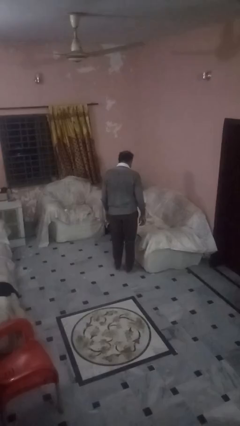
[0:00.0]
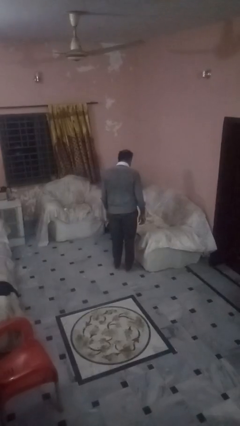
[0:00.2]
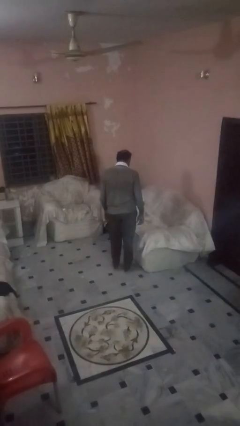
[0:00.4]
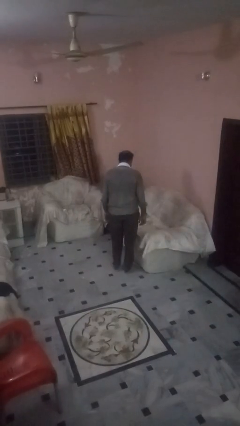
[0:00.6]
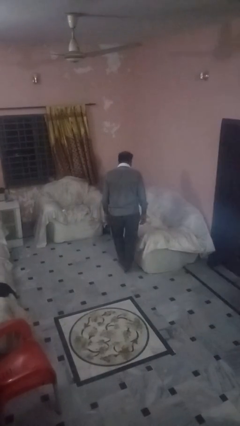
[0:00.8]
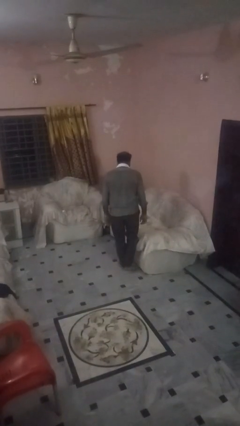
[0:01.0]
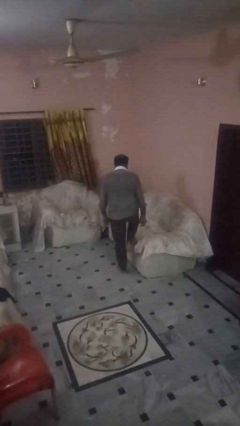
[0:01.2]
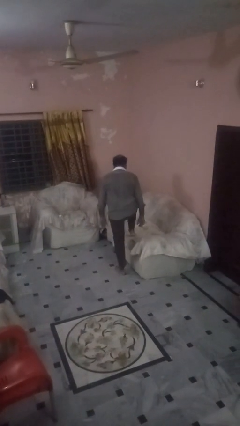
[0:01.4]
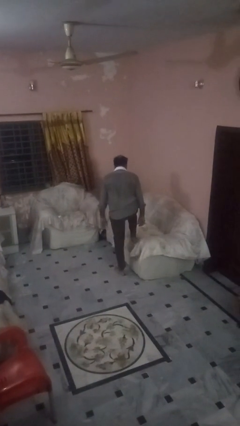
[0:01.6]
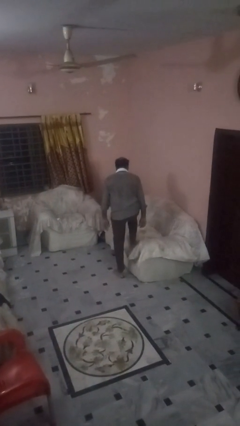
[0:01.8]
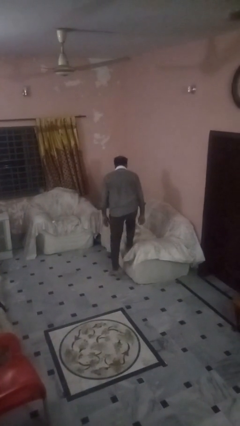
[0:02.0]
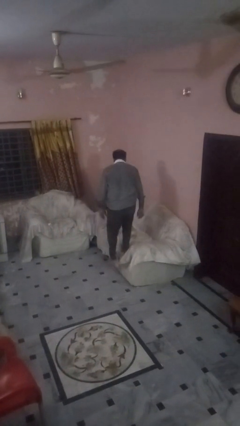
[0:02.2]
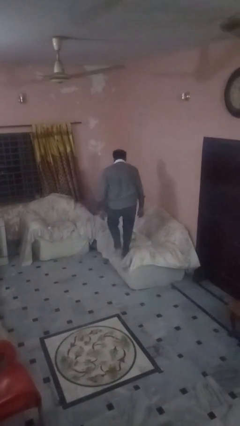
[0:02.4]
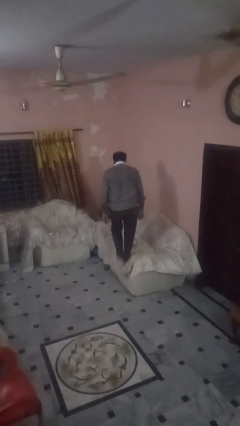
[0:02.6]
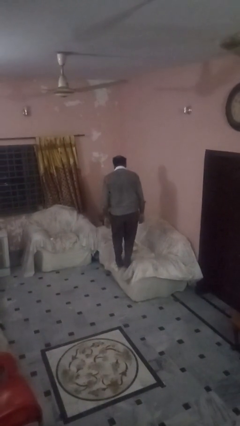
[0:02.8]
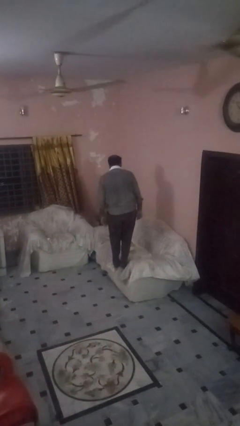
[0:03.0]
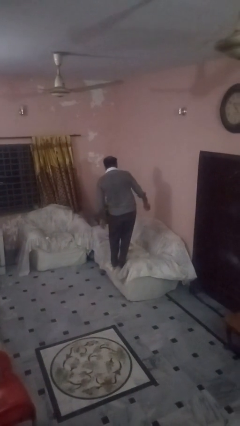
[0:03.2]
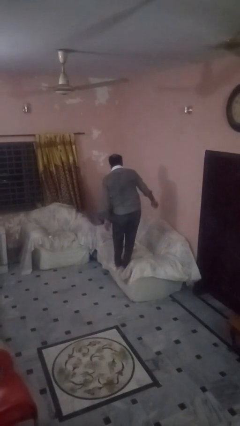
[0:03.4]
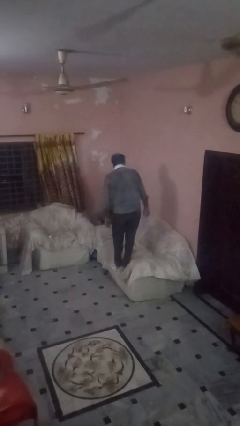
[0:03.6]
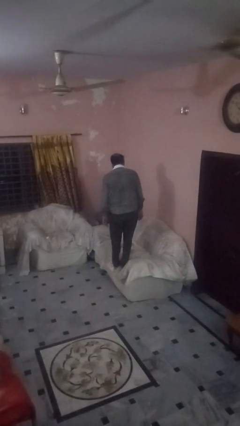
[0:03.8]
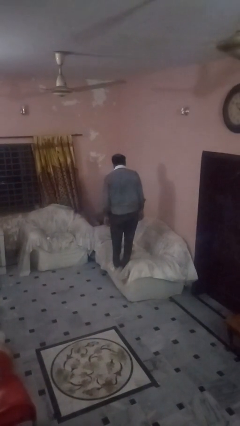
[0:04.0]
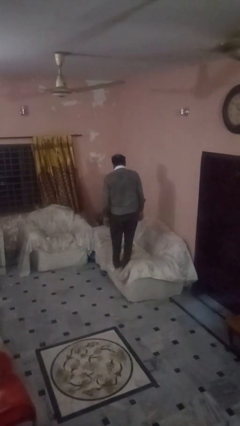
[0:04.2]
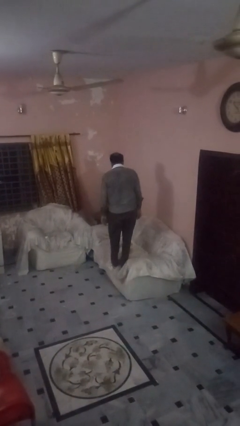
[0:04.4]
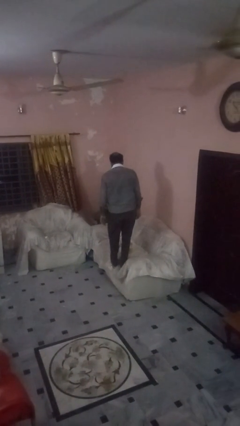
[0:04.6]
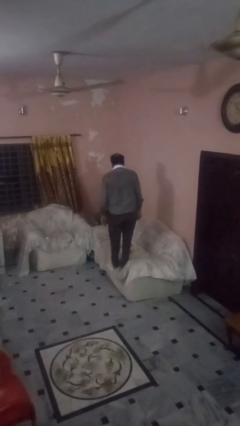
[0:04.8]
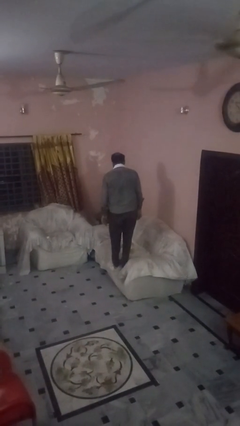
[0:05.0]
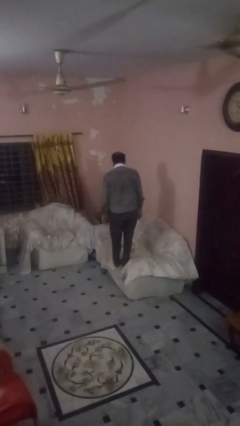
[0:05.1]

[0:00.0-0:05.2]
person climbs on couch

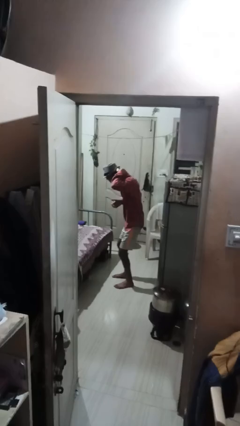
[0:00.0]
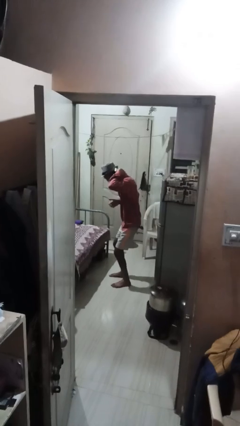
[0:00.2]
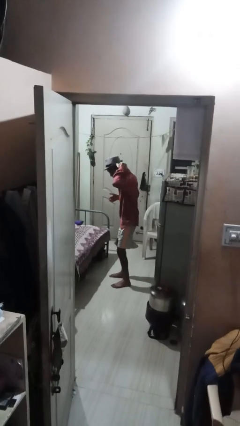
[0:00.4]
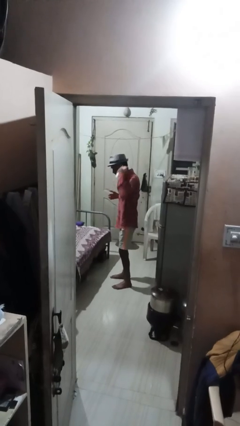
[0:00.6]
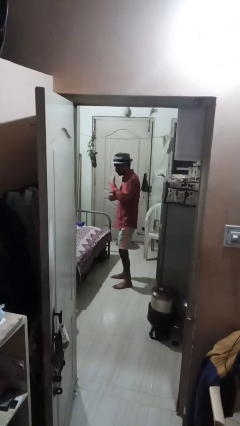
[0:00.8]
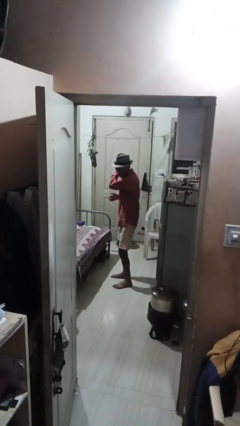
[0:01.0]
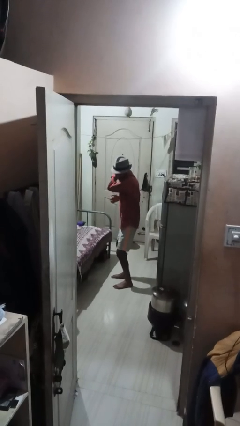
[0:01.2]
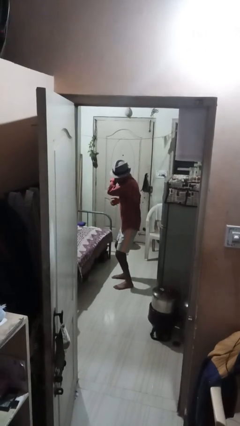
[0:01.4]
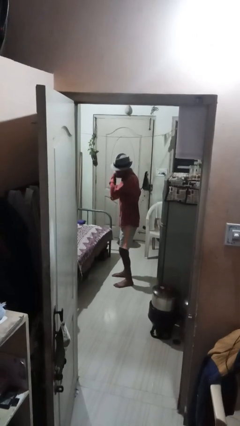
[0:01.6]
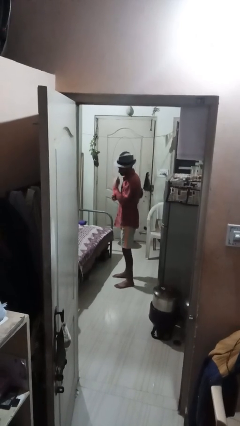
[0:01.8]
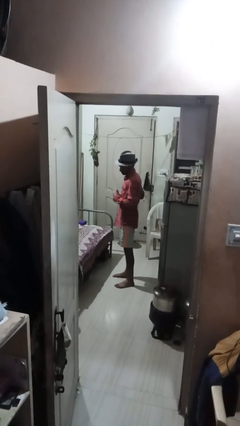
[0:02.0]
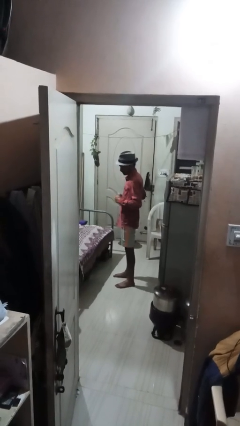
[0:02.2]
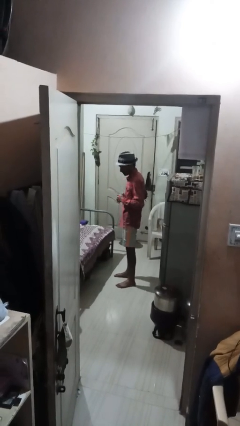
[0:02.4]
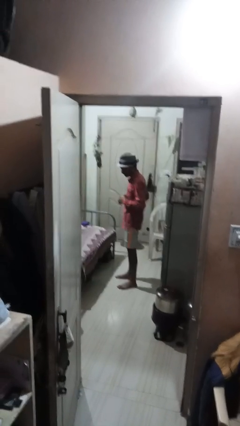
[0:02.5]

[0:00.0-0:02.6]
person applies deodorant

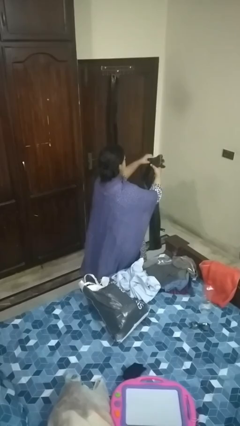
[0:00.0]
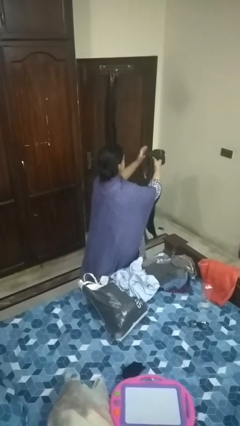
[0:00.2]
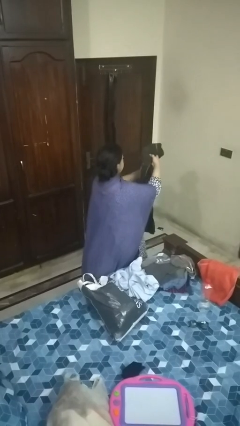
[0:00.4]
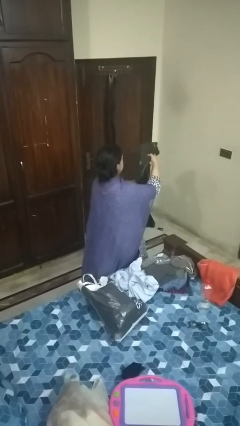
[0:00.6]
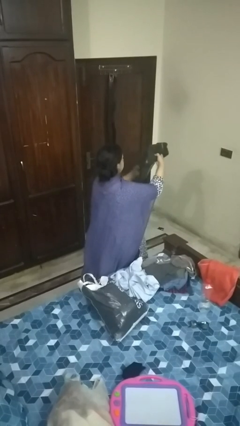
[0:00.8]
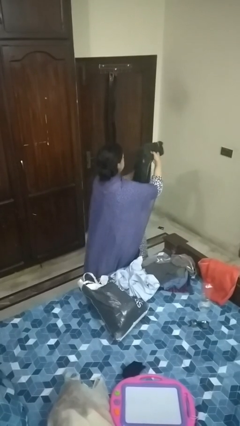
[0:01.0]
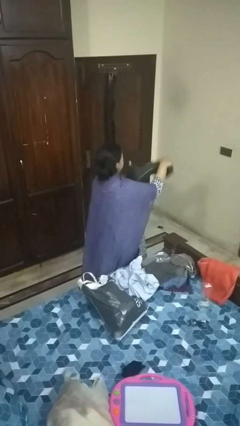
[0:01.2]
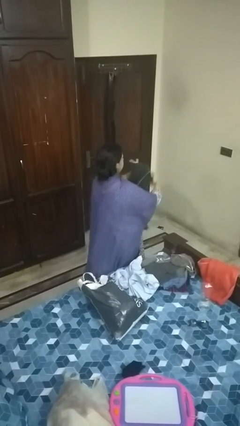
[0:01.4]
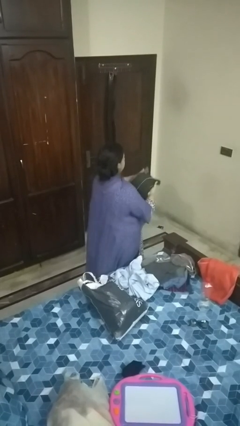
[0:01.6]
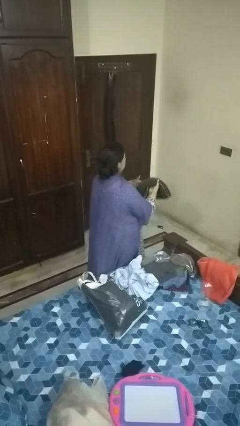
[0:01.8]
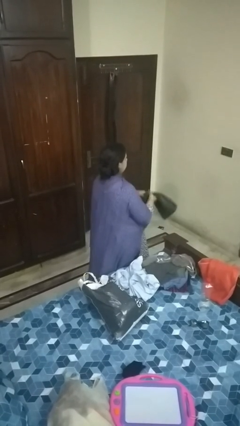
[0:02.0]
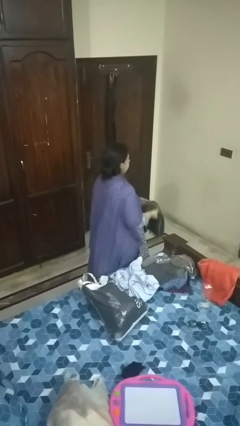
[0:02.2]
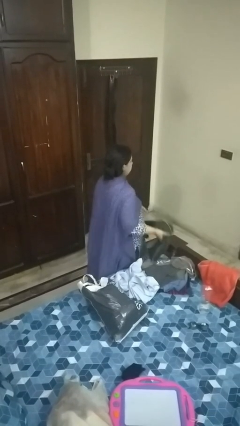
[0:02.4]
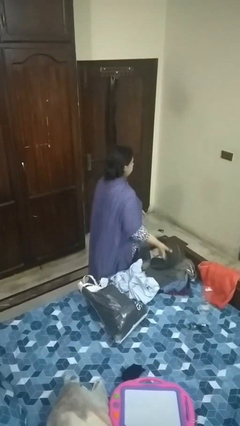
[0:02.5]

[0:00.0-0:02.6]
person folds pants

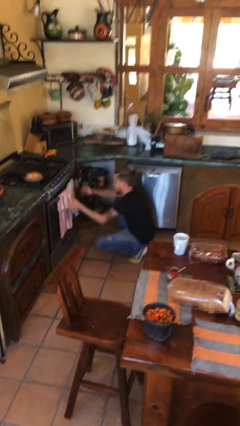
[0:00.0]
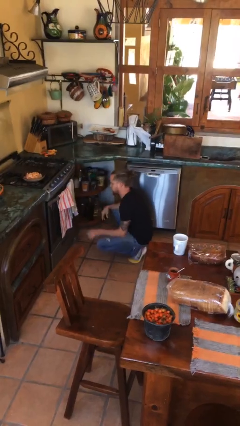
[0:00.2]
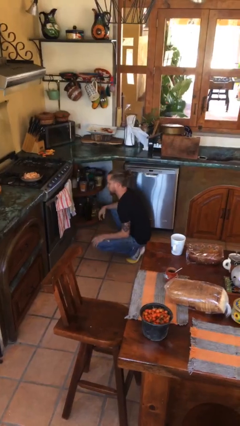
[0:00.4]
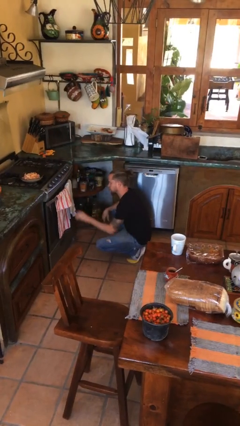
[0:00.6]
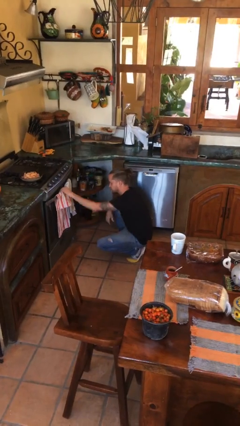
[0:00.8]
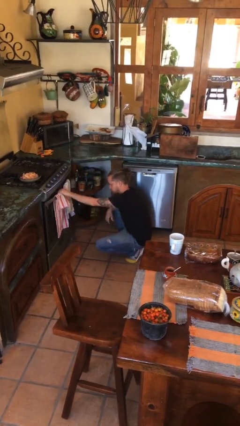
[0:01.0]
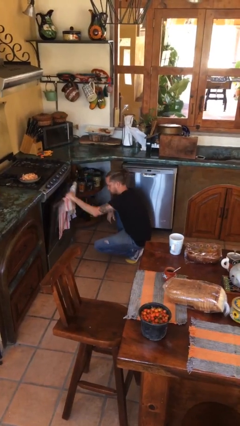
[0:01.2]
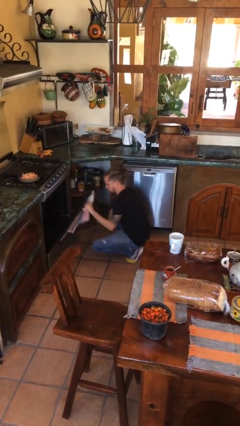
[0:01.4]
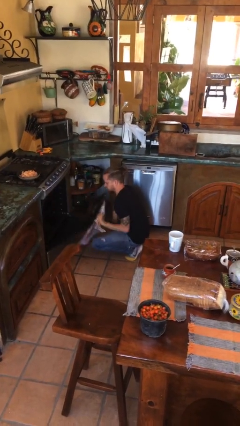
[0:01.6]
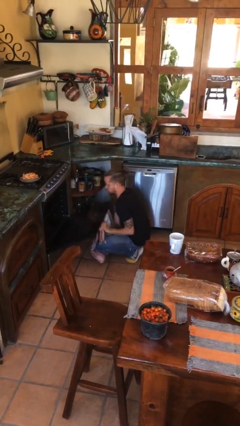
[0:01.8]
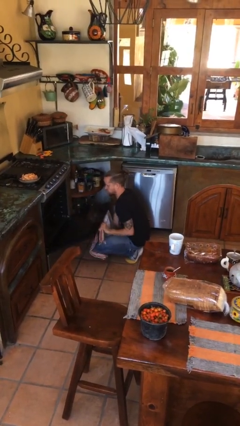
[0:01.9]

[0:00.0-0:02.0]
person opens oven door

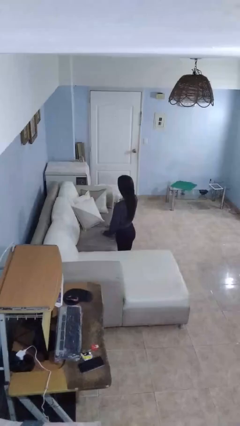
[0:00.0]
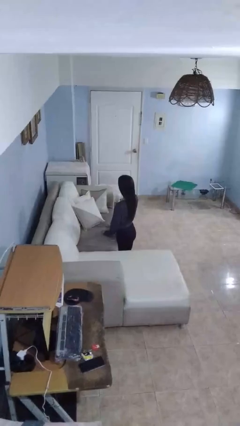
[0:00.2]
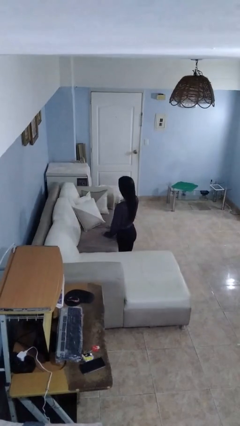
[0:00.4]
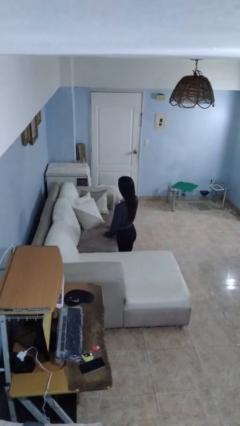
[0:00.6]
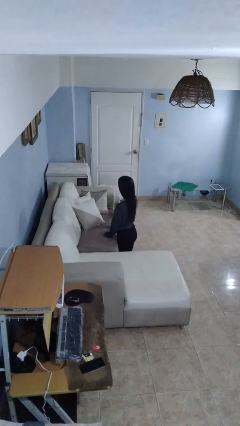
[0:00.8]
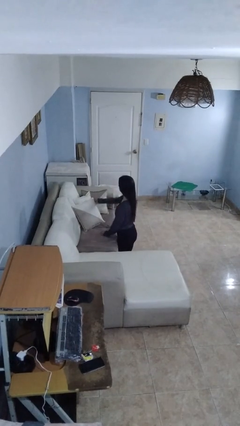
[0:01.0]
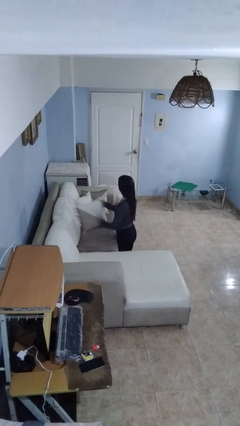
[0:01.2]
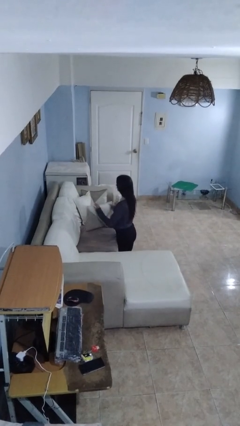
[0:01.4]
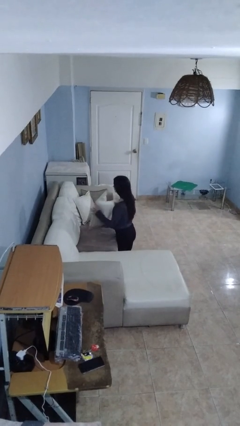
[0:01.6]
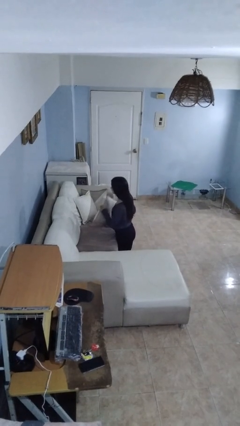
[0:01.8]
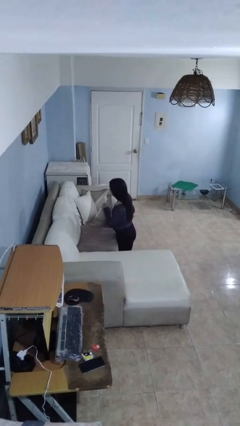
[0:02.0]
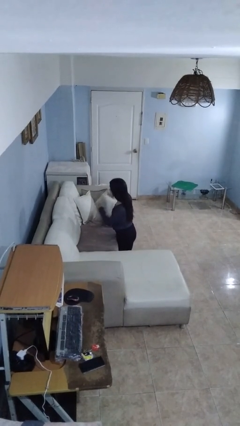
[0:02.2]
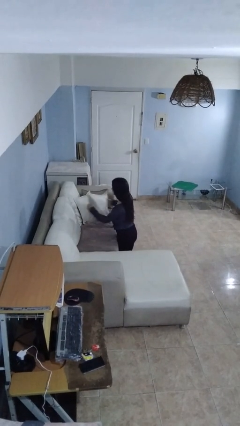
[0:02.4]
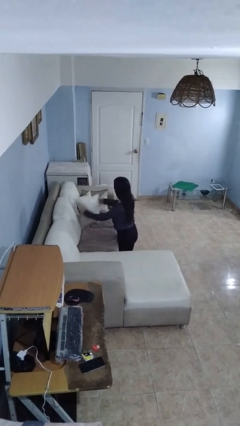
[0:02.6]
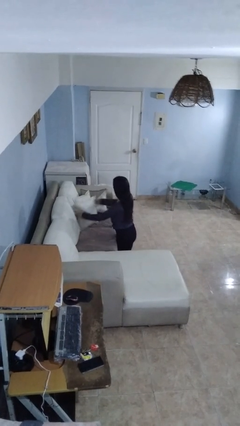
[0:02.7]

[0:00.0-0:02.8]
person searches in couch

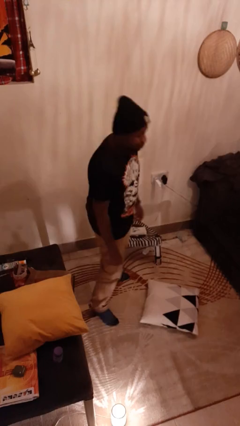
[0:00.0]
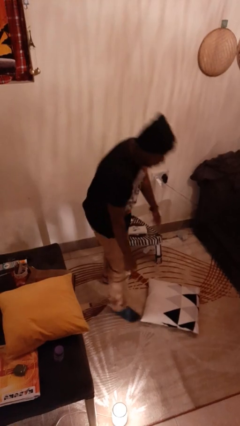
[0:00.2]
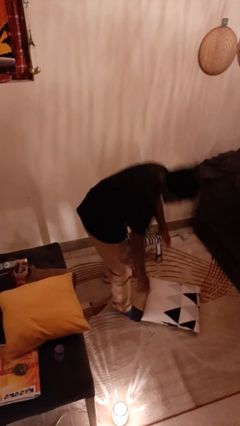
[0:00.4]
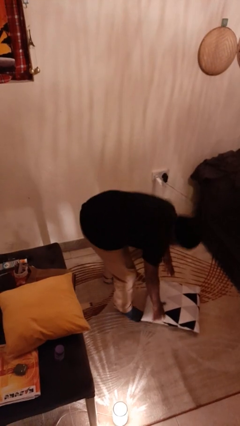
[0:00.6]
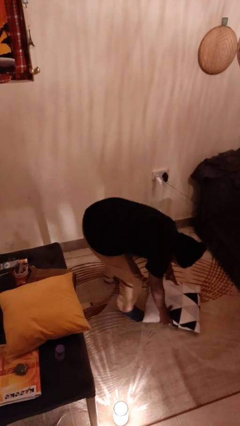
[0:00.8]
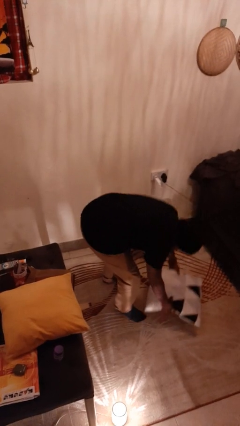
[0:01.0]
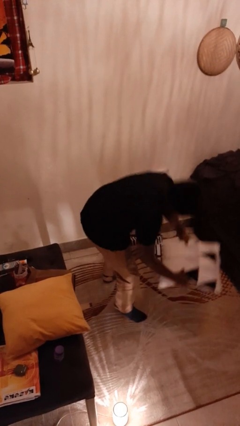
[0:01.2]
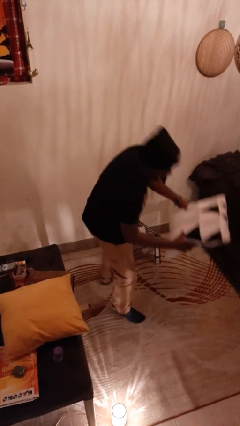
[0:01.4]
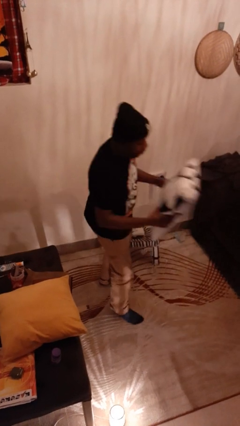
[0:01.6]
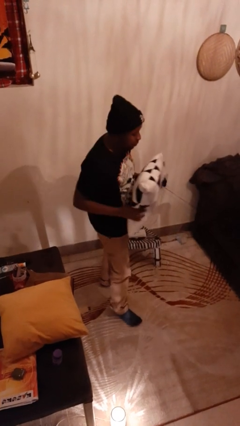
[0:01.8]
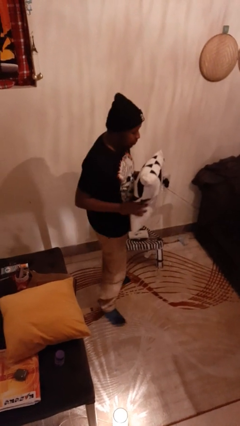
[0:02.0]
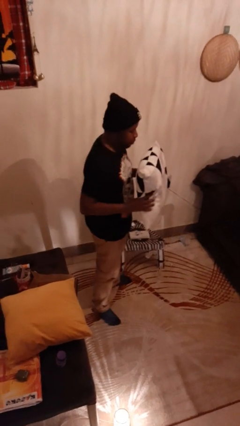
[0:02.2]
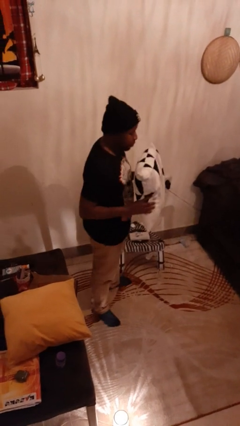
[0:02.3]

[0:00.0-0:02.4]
person picks up object from floor
